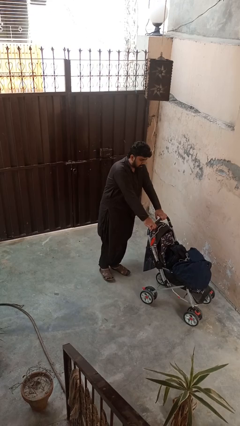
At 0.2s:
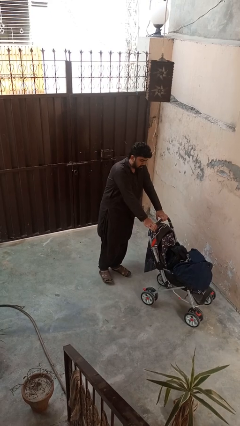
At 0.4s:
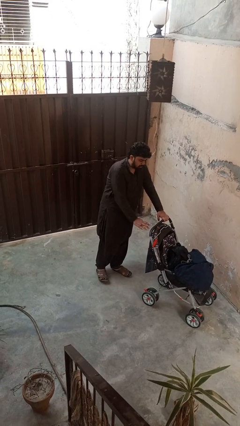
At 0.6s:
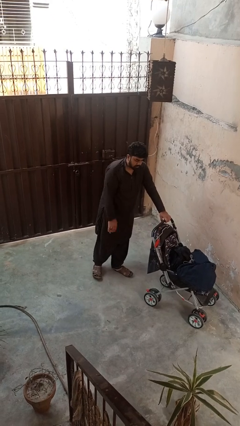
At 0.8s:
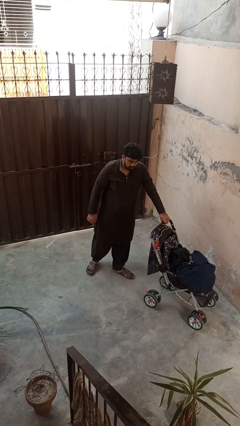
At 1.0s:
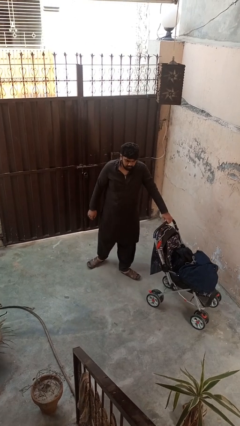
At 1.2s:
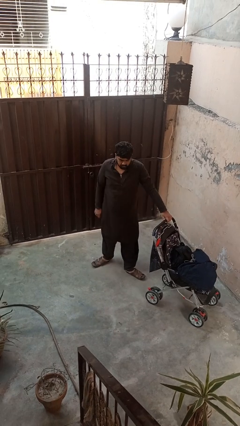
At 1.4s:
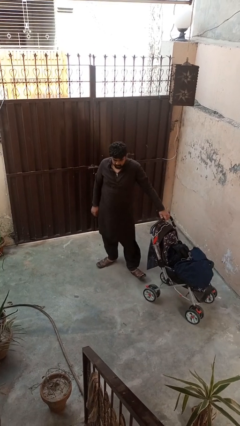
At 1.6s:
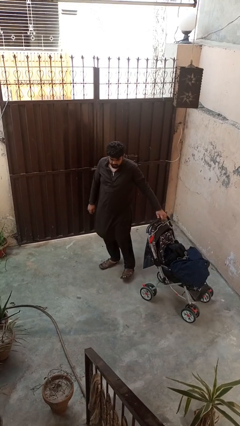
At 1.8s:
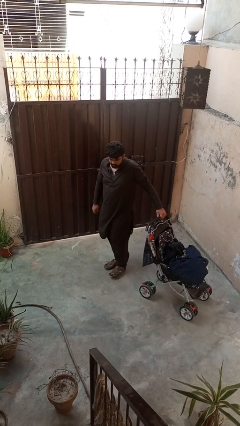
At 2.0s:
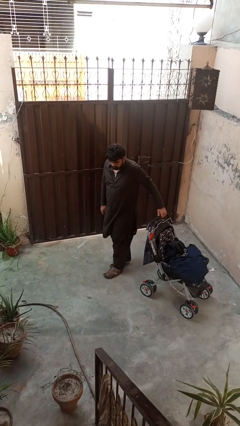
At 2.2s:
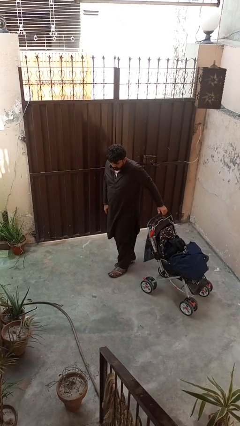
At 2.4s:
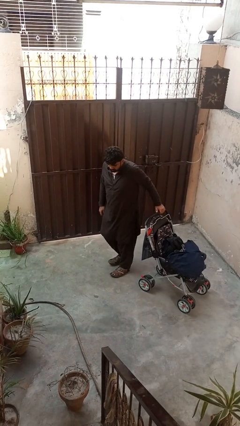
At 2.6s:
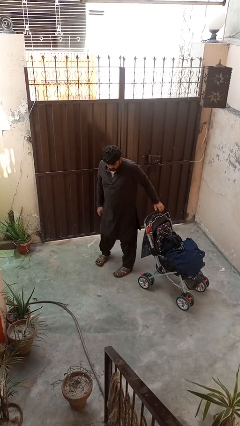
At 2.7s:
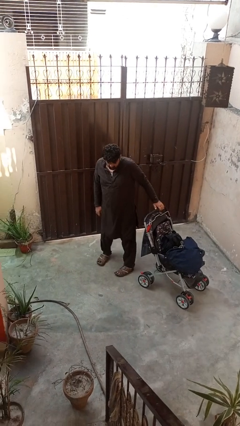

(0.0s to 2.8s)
person pulls wheeled cart

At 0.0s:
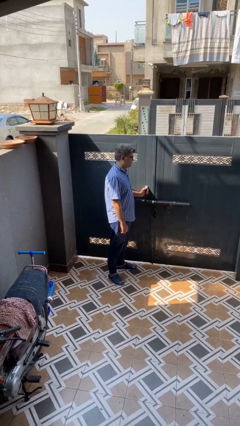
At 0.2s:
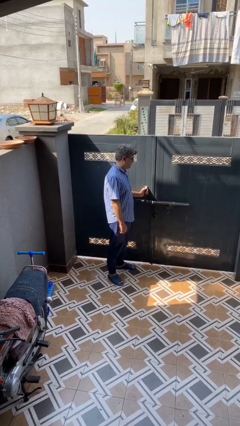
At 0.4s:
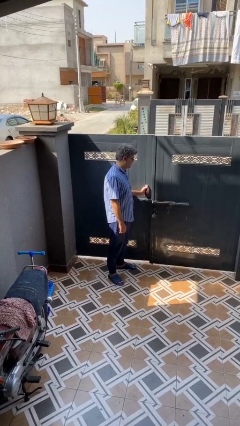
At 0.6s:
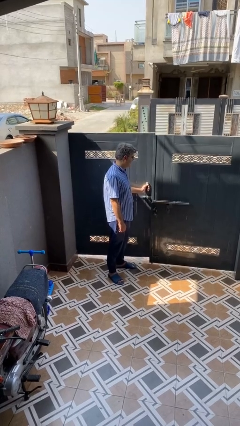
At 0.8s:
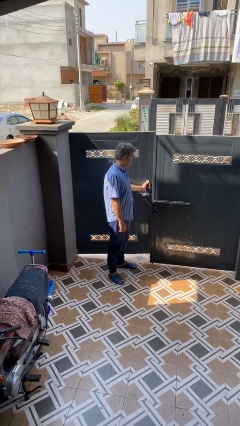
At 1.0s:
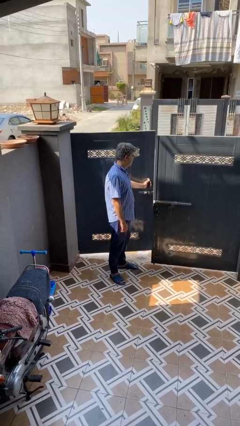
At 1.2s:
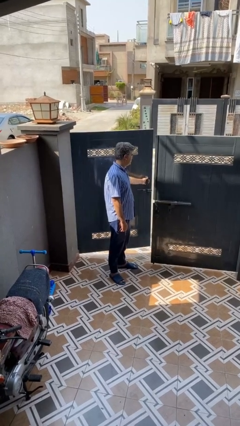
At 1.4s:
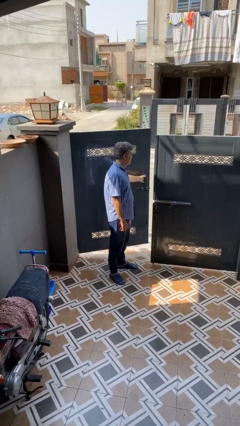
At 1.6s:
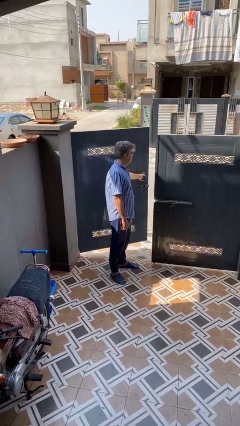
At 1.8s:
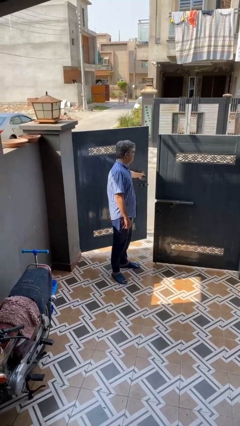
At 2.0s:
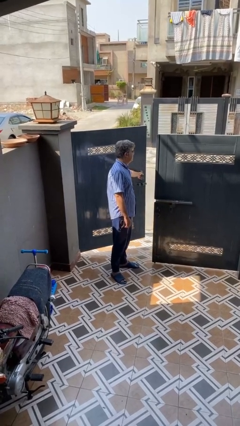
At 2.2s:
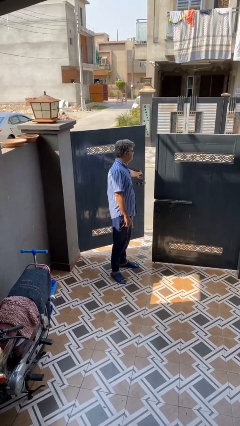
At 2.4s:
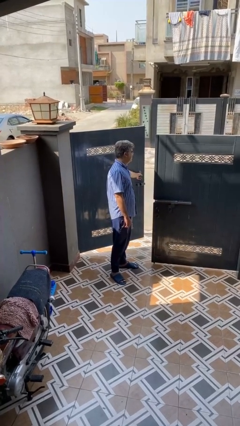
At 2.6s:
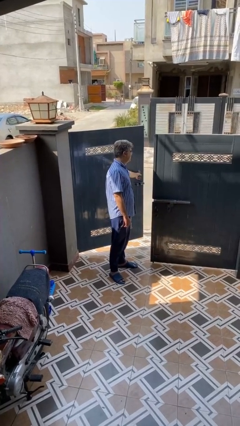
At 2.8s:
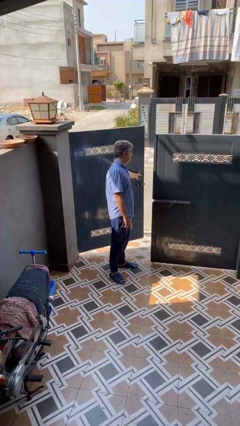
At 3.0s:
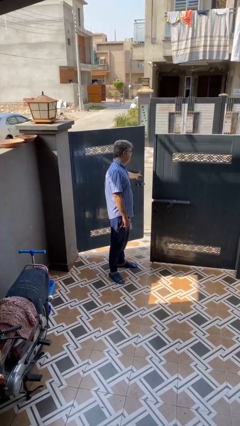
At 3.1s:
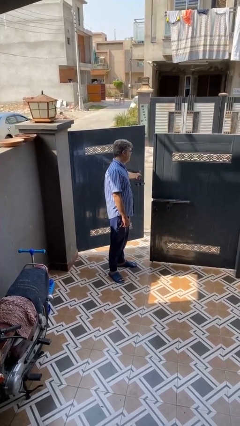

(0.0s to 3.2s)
person opens gate

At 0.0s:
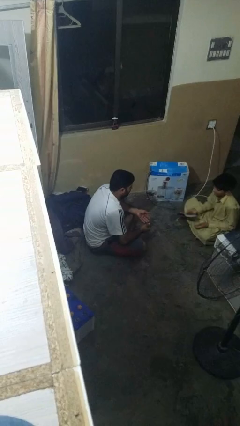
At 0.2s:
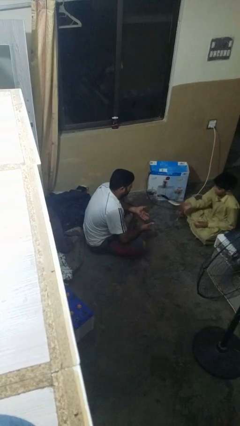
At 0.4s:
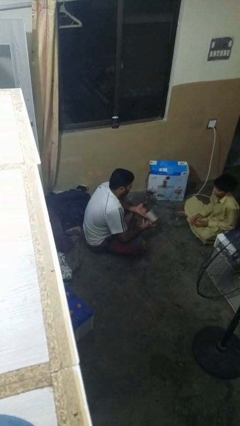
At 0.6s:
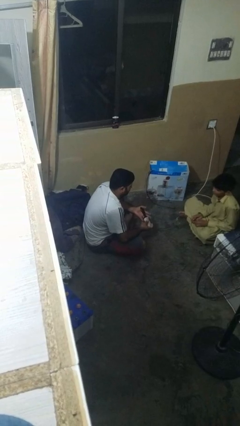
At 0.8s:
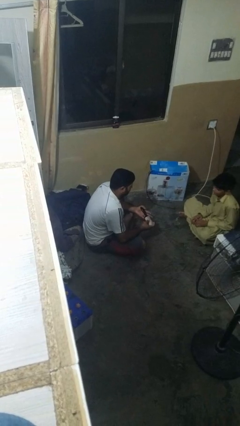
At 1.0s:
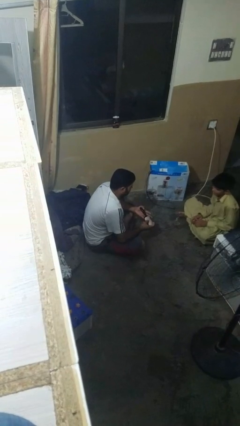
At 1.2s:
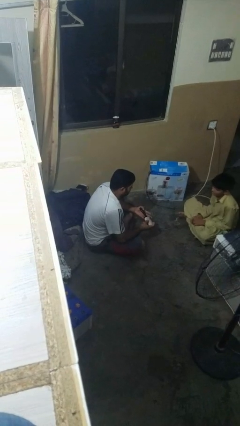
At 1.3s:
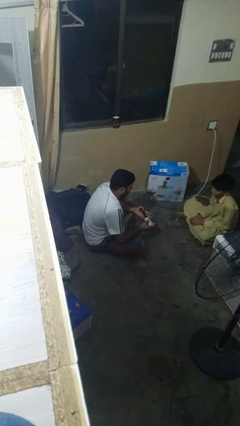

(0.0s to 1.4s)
person catches object from person

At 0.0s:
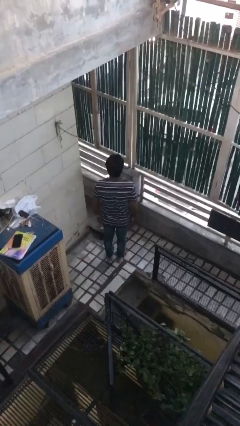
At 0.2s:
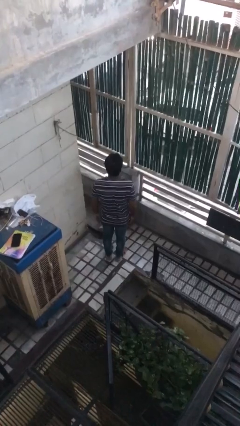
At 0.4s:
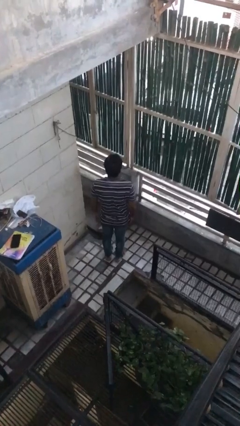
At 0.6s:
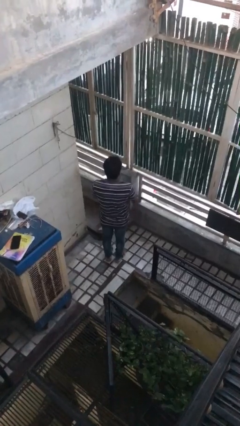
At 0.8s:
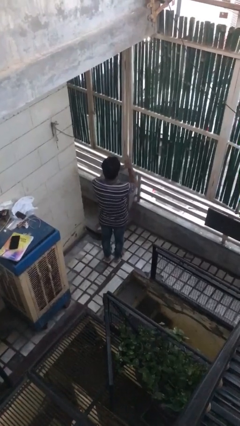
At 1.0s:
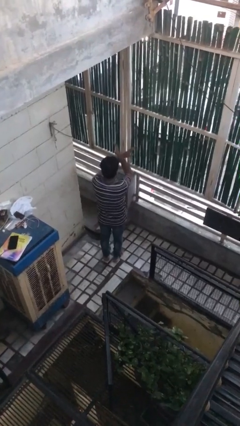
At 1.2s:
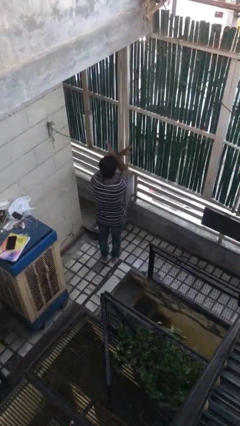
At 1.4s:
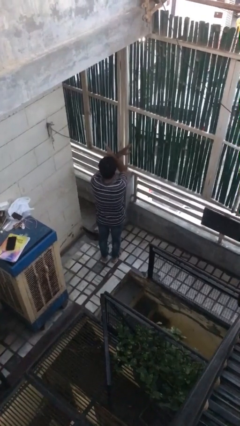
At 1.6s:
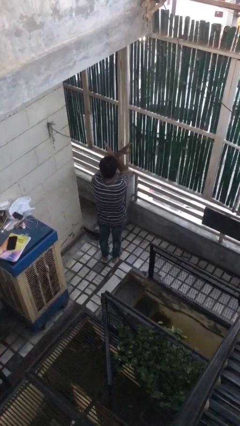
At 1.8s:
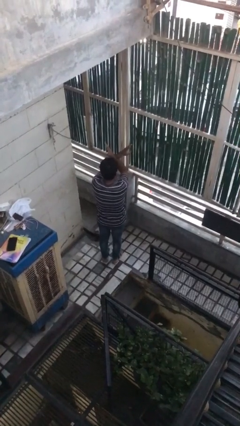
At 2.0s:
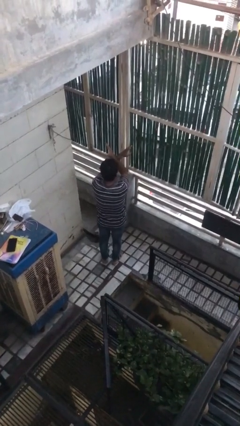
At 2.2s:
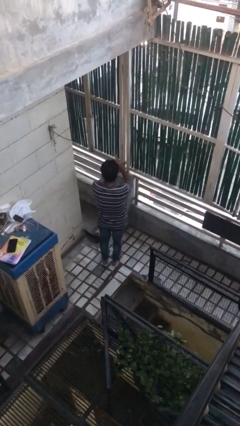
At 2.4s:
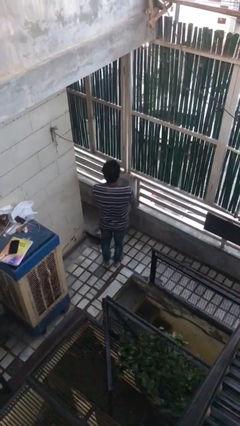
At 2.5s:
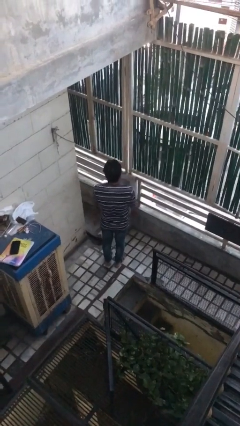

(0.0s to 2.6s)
person gestures arms x

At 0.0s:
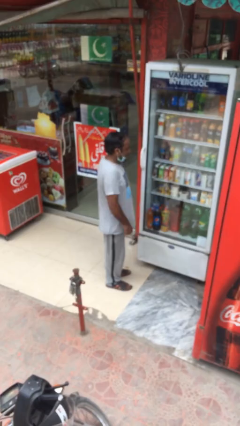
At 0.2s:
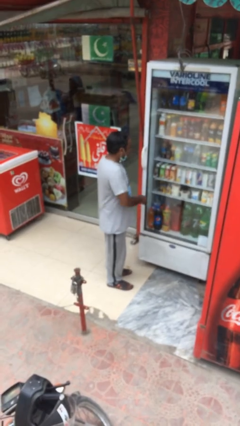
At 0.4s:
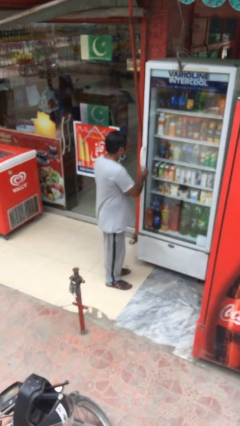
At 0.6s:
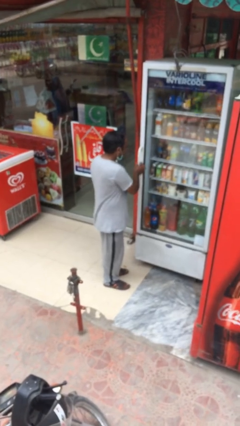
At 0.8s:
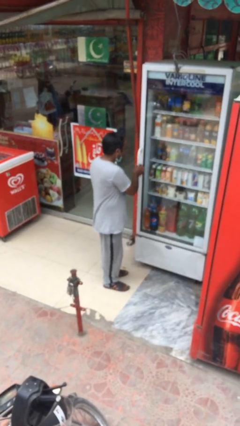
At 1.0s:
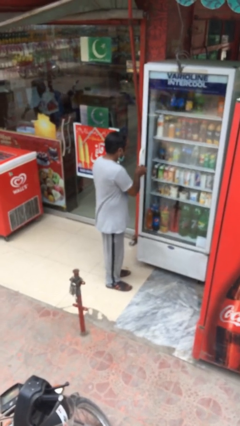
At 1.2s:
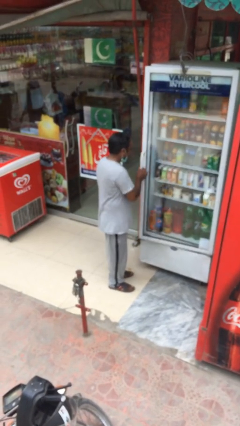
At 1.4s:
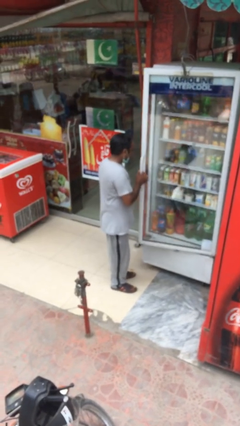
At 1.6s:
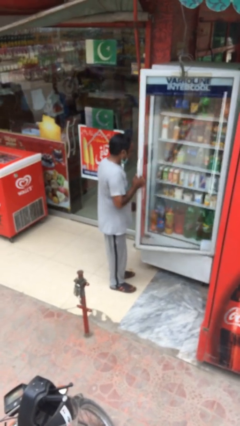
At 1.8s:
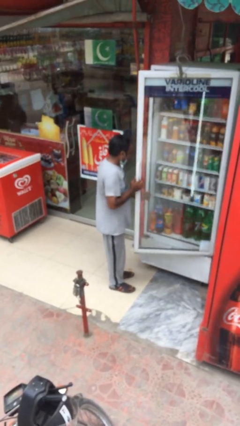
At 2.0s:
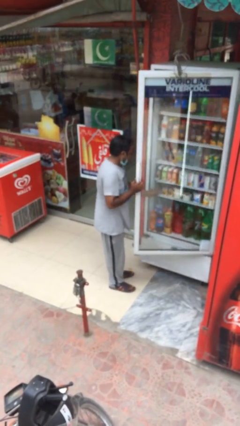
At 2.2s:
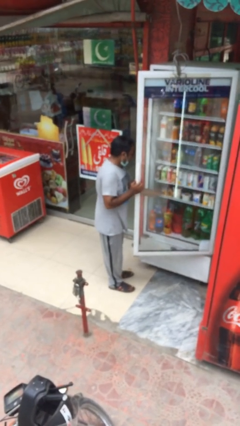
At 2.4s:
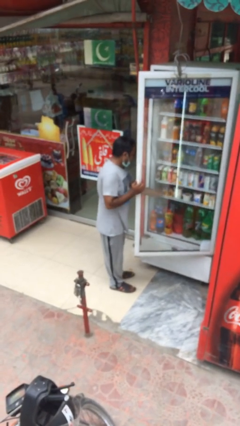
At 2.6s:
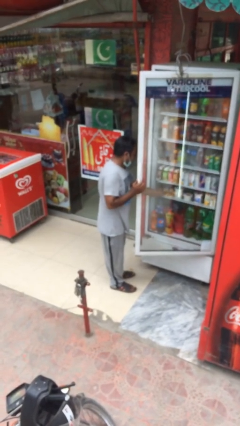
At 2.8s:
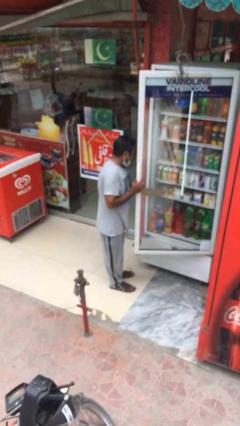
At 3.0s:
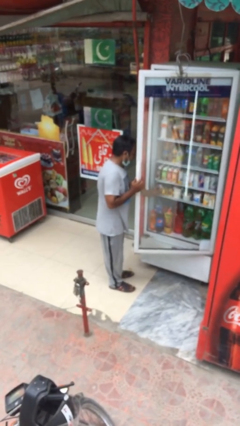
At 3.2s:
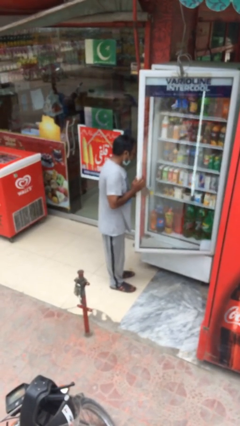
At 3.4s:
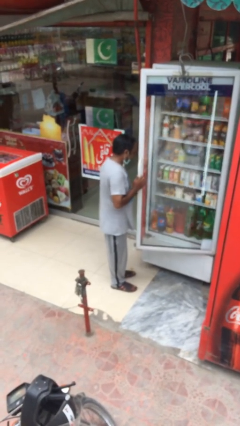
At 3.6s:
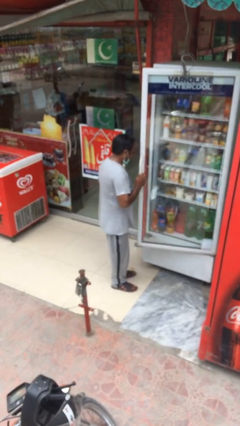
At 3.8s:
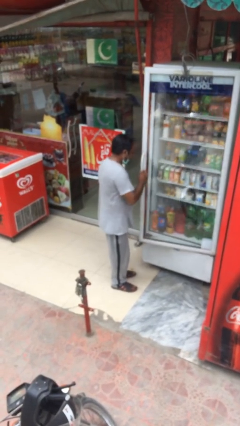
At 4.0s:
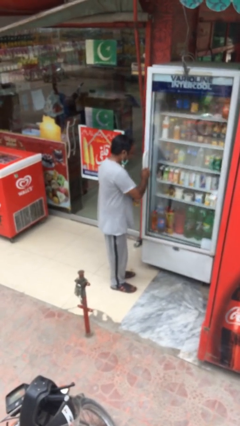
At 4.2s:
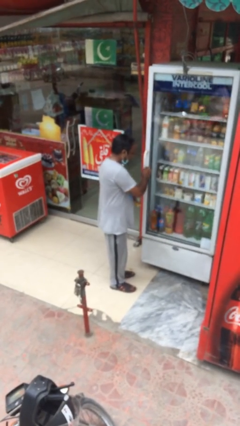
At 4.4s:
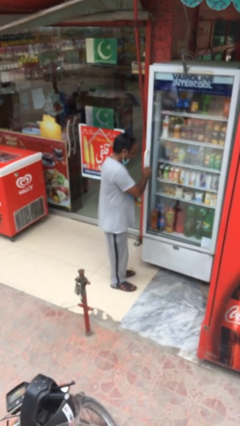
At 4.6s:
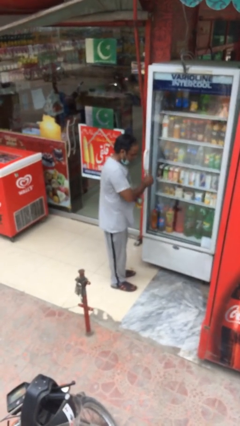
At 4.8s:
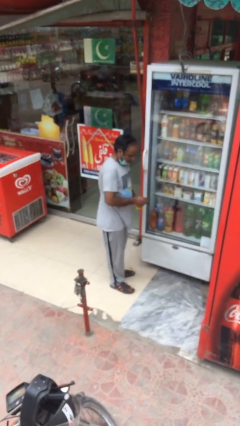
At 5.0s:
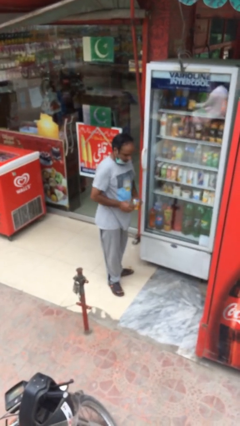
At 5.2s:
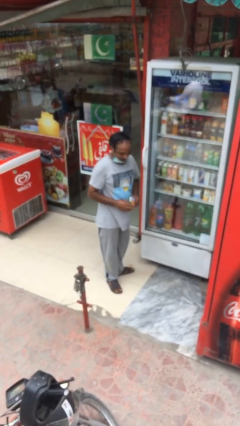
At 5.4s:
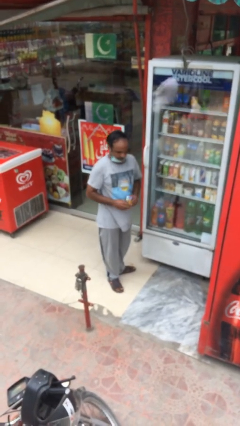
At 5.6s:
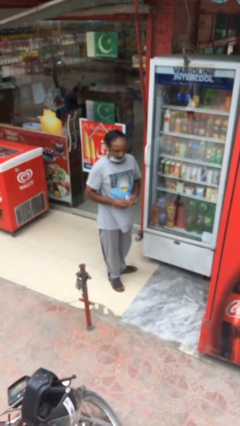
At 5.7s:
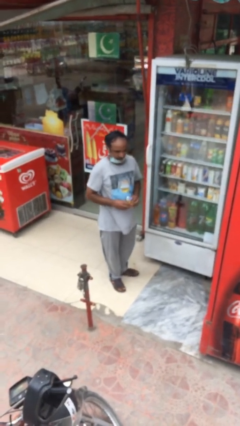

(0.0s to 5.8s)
person purchases from machine

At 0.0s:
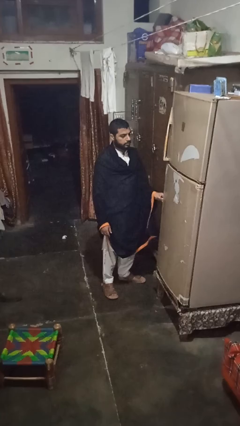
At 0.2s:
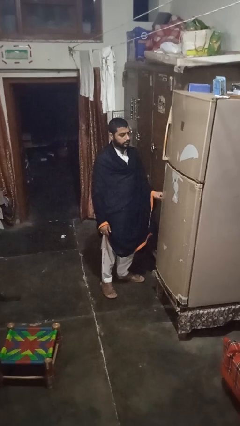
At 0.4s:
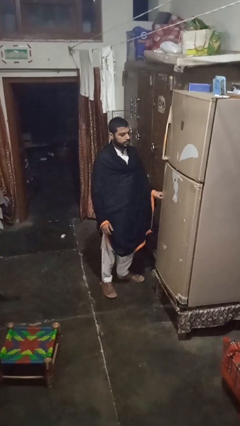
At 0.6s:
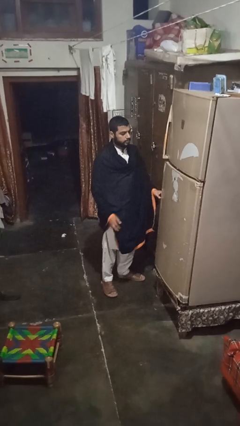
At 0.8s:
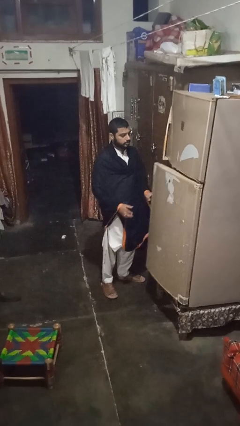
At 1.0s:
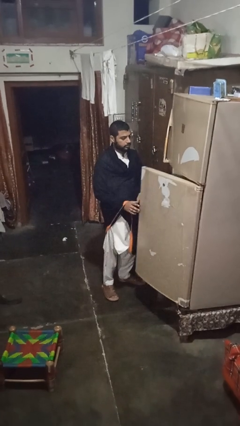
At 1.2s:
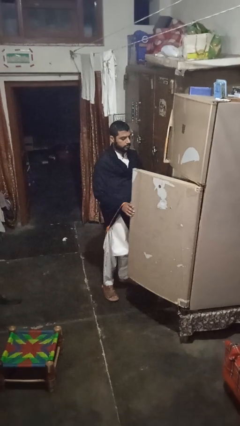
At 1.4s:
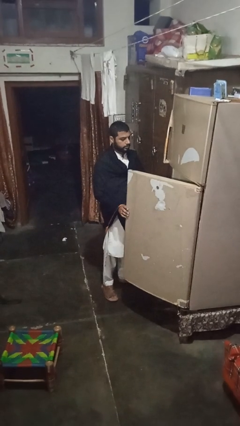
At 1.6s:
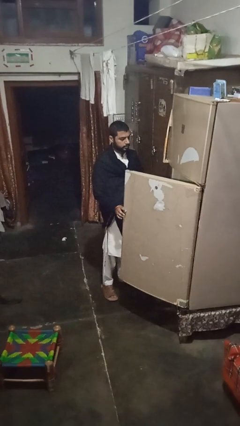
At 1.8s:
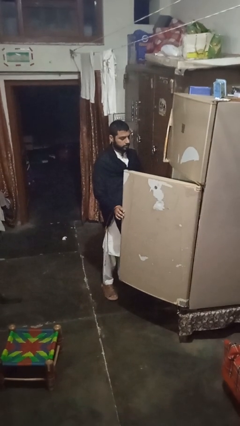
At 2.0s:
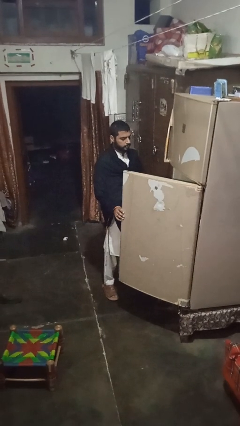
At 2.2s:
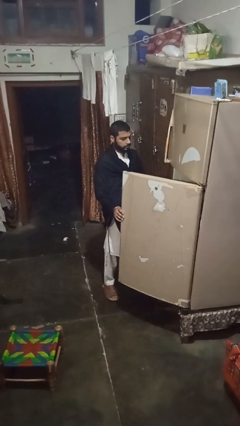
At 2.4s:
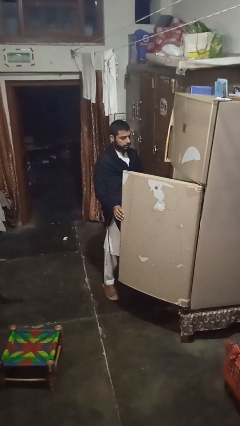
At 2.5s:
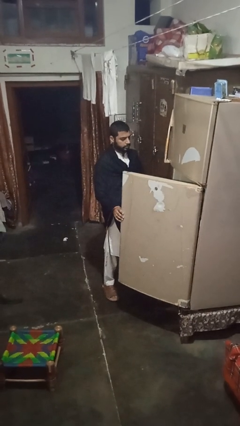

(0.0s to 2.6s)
person opens refrigerator
